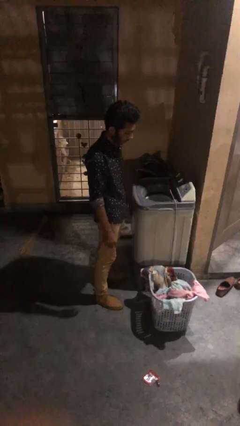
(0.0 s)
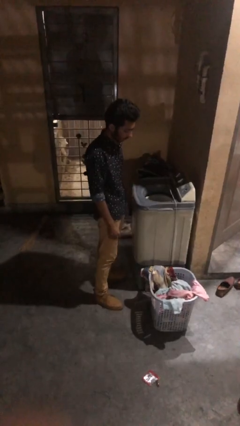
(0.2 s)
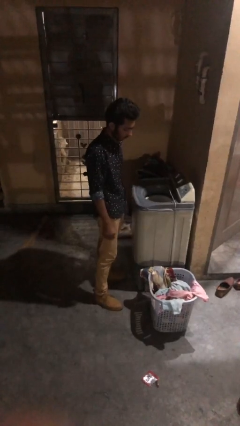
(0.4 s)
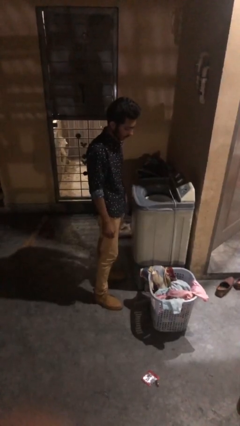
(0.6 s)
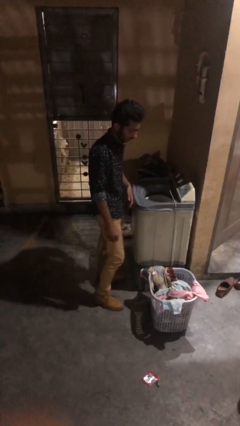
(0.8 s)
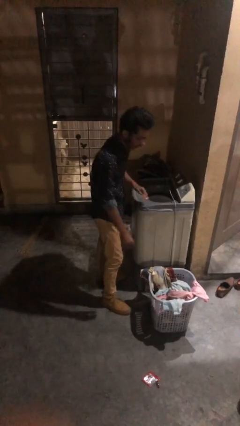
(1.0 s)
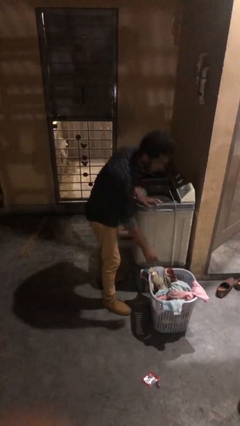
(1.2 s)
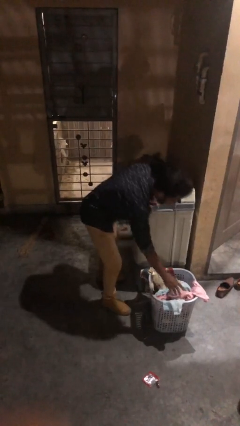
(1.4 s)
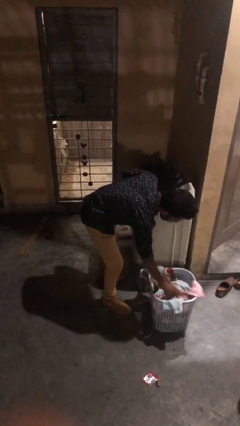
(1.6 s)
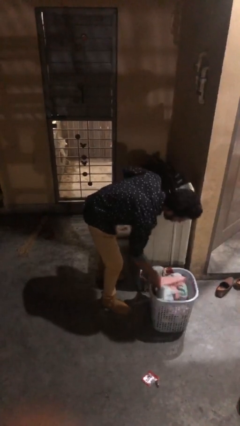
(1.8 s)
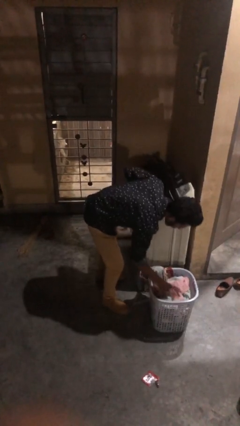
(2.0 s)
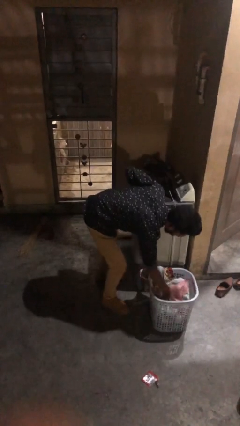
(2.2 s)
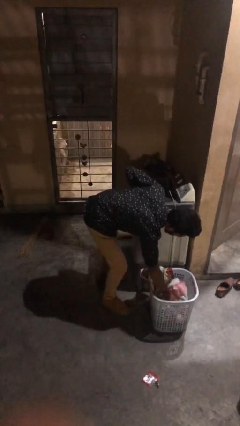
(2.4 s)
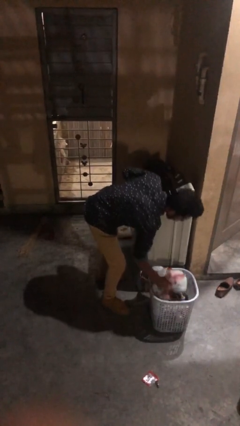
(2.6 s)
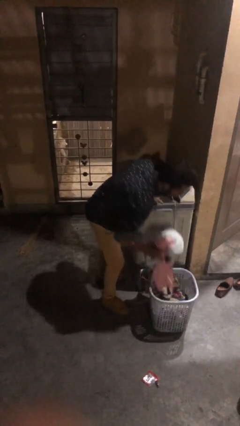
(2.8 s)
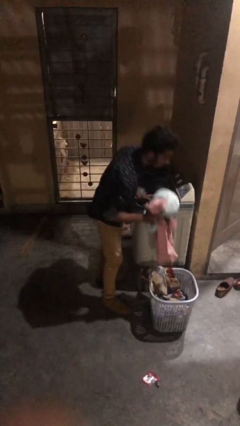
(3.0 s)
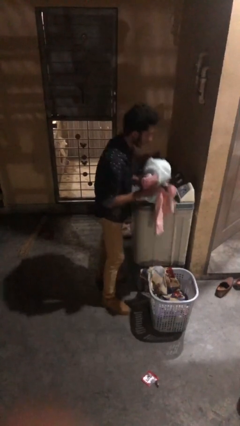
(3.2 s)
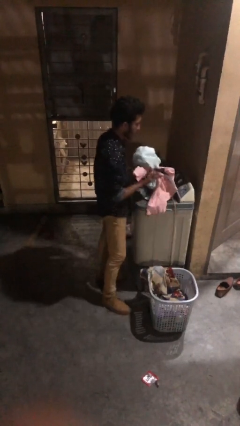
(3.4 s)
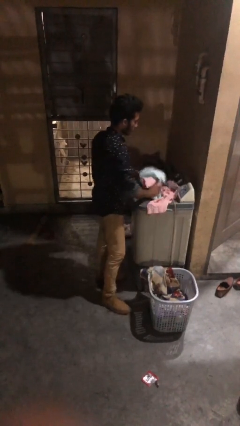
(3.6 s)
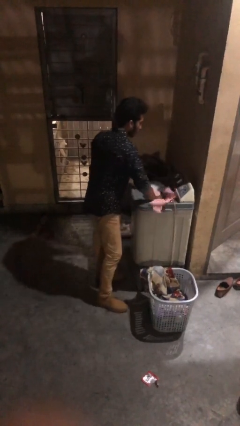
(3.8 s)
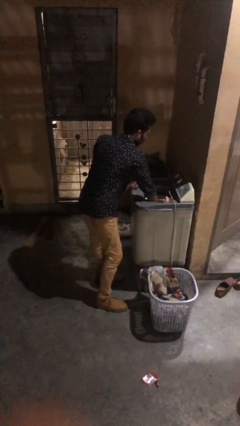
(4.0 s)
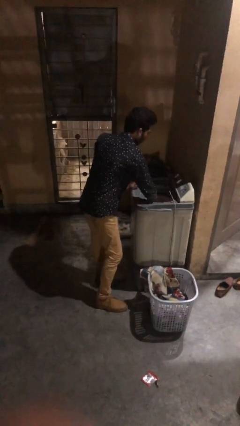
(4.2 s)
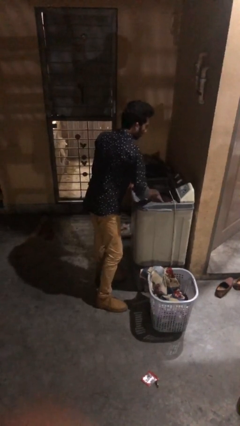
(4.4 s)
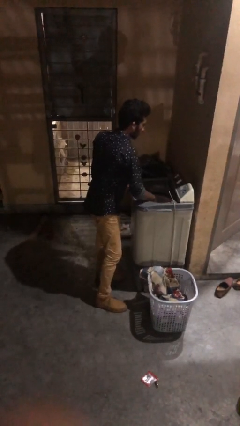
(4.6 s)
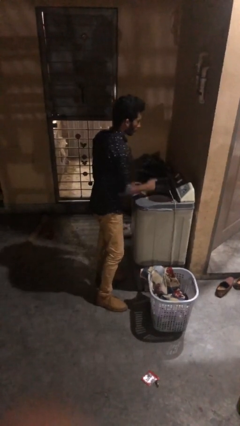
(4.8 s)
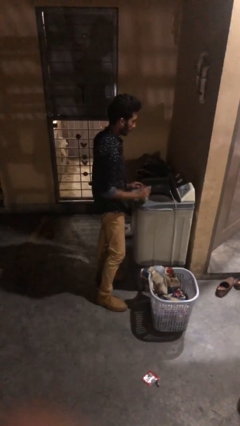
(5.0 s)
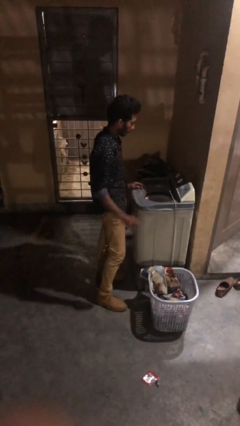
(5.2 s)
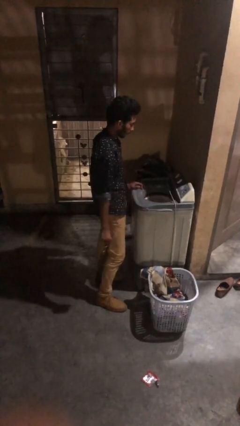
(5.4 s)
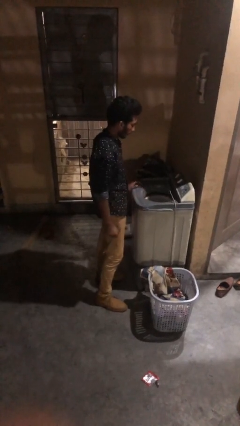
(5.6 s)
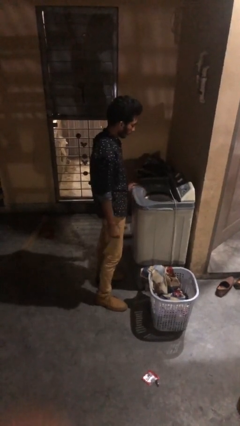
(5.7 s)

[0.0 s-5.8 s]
person loads clotheswasher

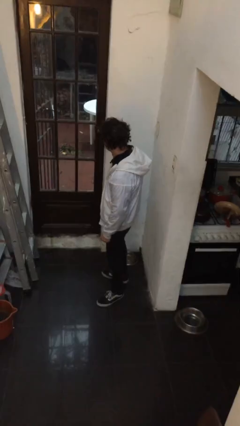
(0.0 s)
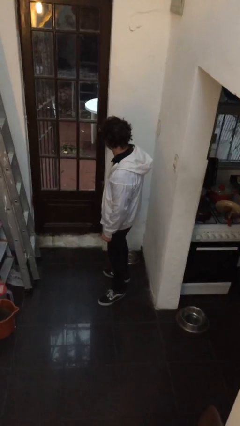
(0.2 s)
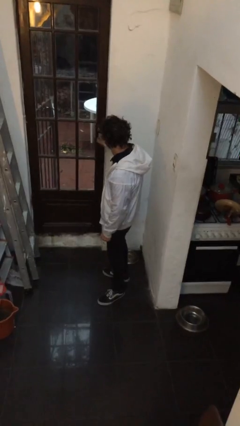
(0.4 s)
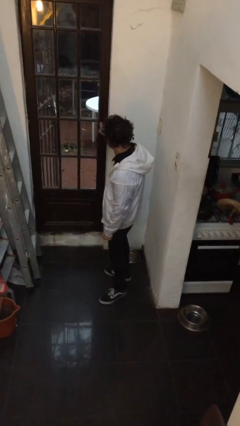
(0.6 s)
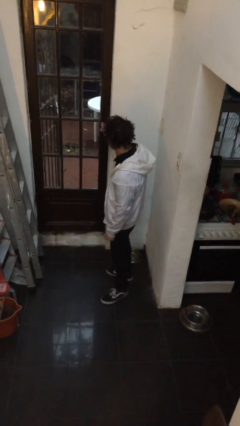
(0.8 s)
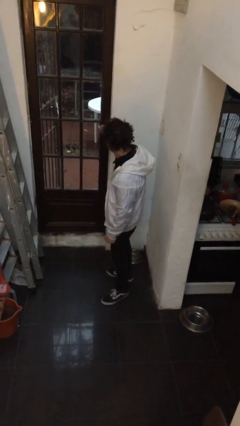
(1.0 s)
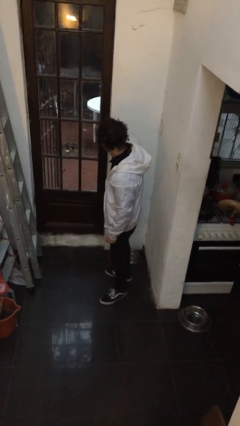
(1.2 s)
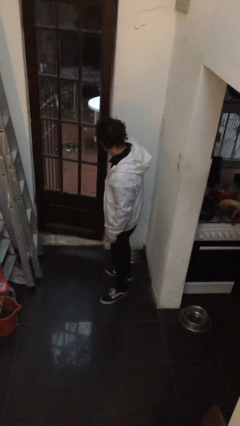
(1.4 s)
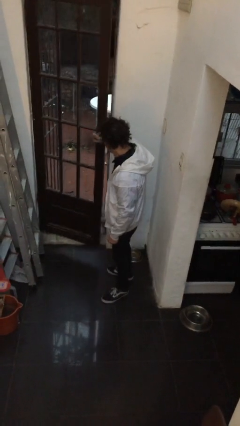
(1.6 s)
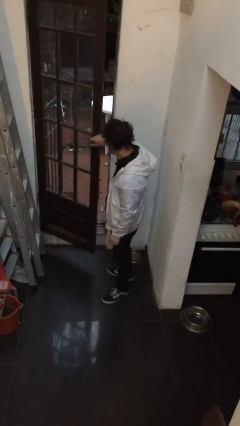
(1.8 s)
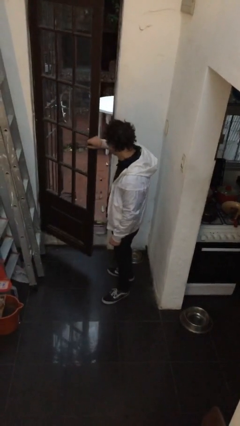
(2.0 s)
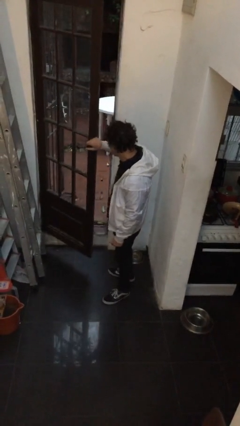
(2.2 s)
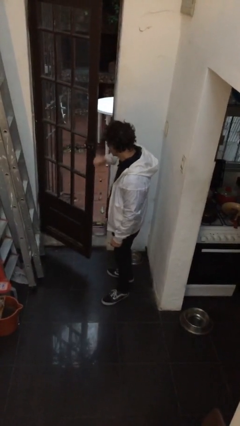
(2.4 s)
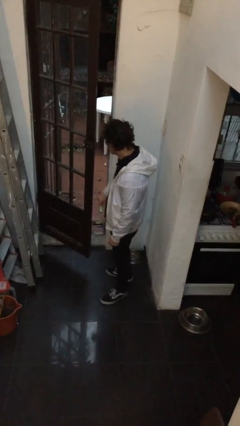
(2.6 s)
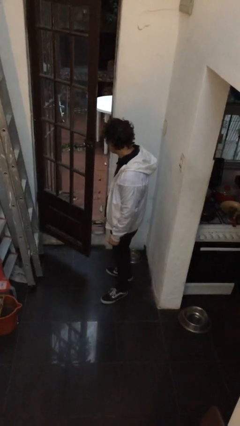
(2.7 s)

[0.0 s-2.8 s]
person opens facility door

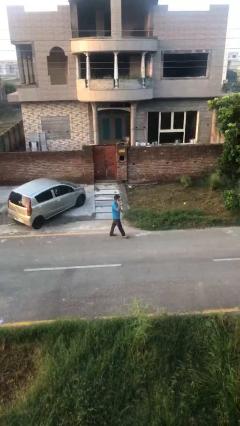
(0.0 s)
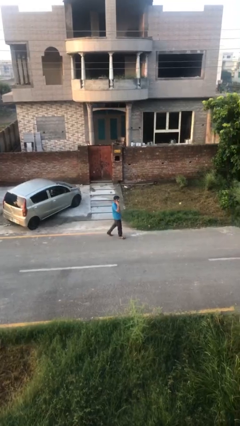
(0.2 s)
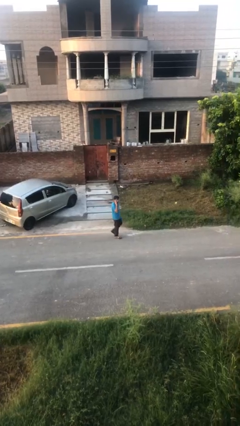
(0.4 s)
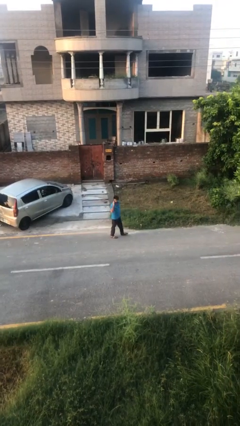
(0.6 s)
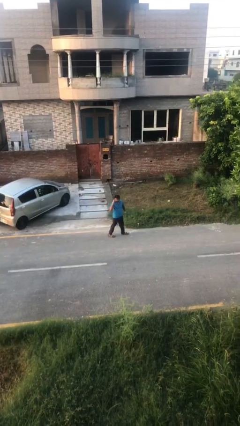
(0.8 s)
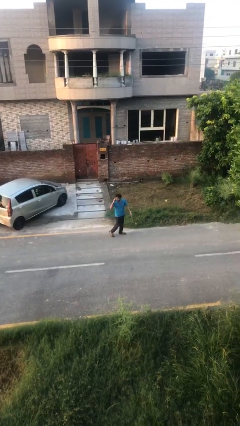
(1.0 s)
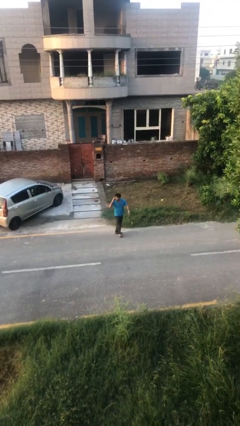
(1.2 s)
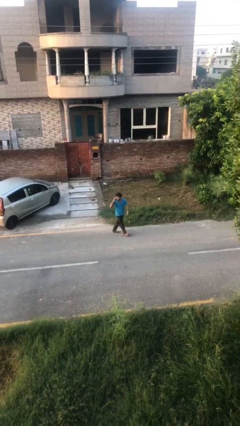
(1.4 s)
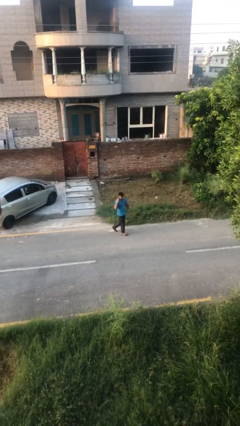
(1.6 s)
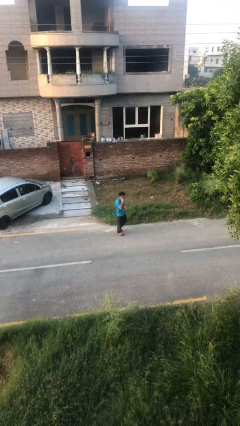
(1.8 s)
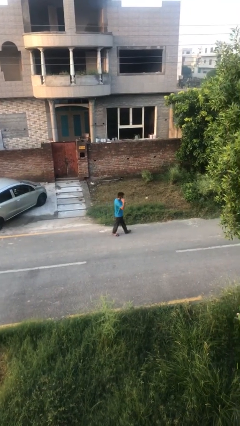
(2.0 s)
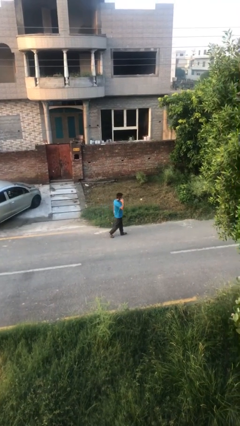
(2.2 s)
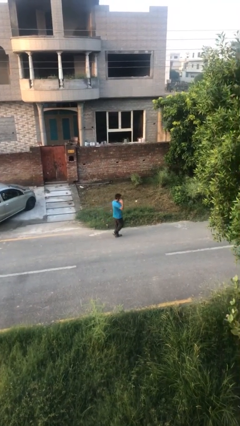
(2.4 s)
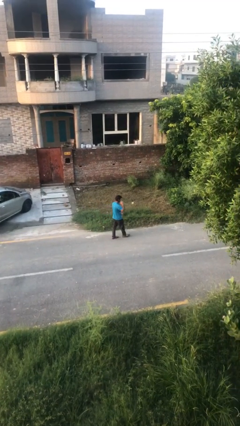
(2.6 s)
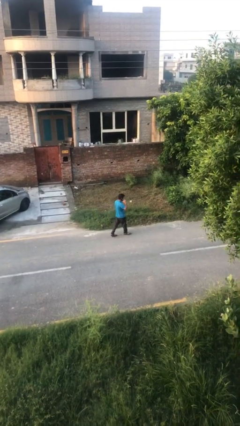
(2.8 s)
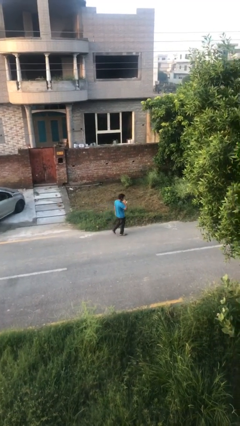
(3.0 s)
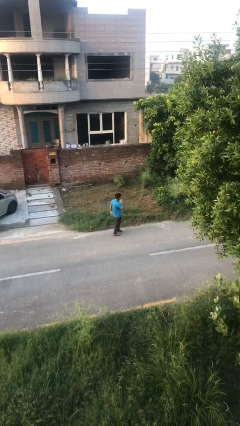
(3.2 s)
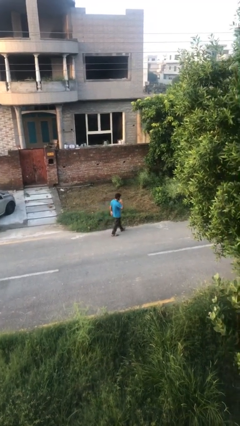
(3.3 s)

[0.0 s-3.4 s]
person talks on phone

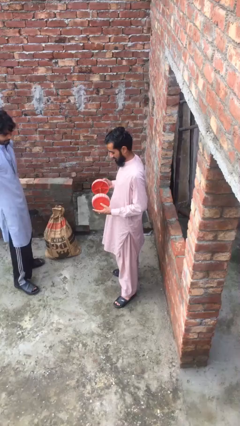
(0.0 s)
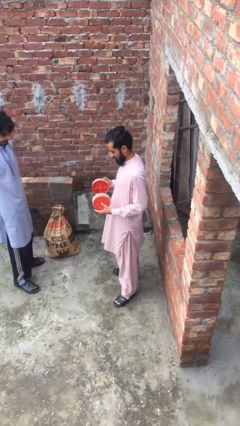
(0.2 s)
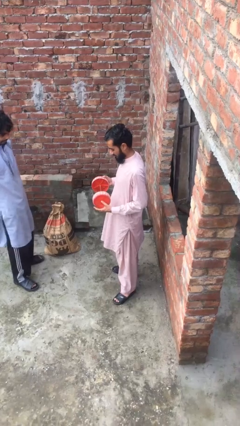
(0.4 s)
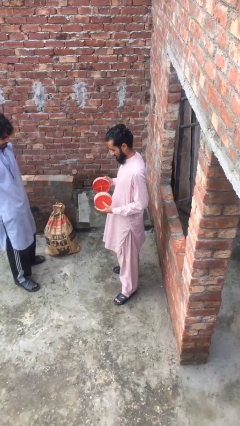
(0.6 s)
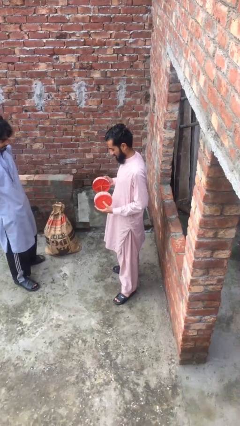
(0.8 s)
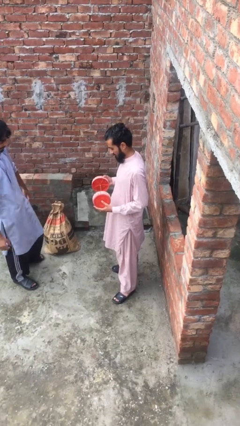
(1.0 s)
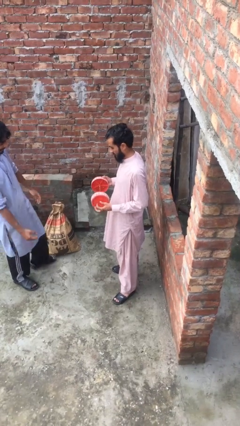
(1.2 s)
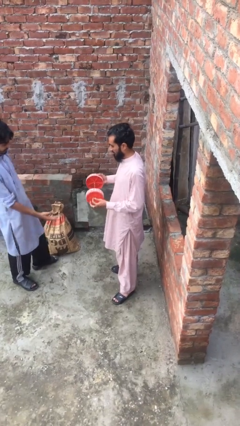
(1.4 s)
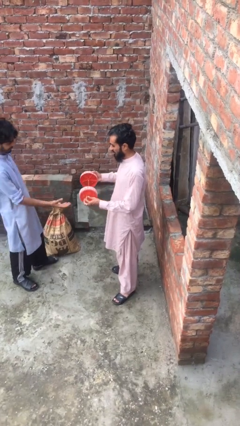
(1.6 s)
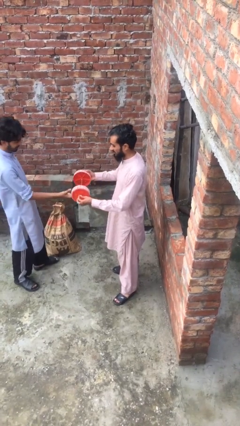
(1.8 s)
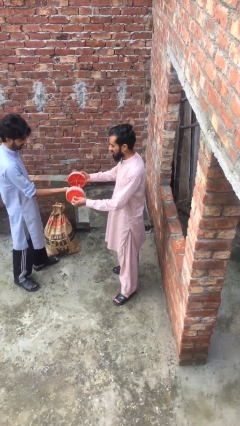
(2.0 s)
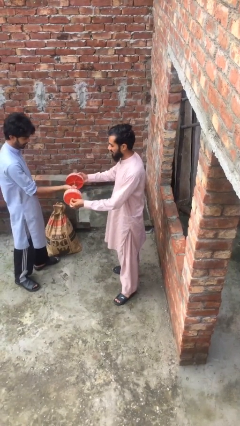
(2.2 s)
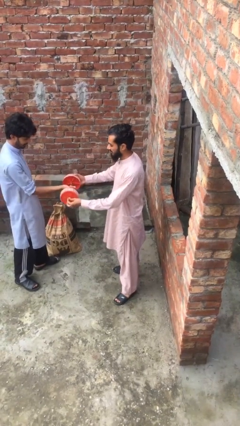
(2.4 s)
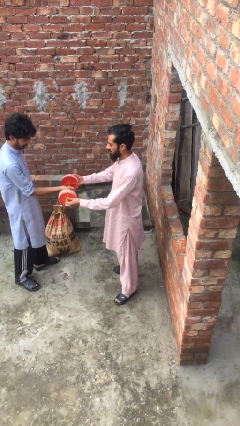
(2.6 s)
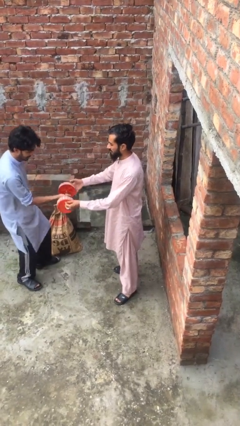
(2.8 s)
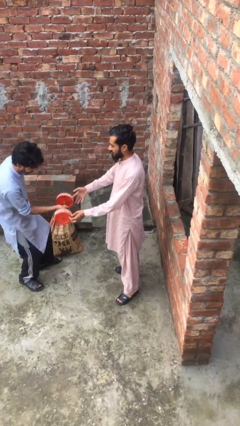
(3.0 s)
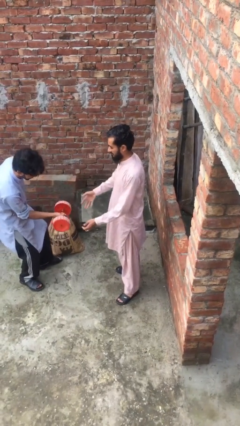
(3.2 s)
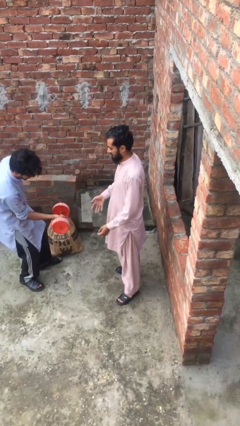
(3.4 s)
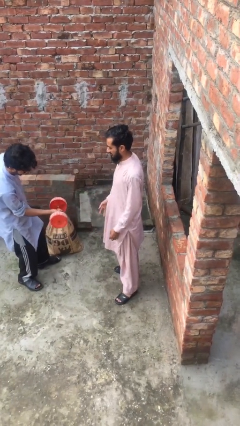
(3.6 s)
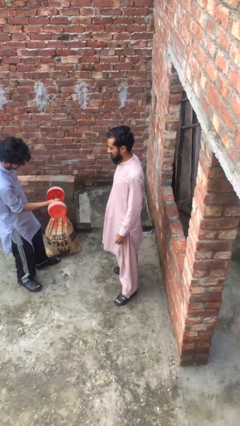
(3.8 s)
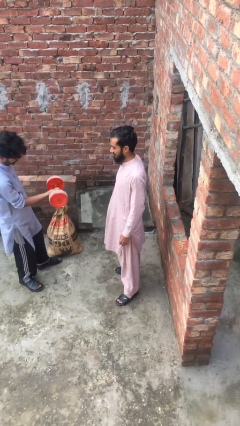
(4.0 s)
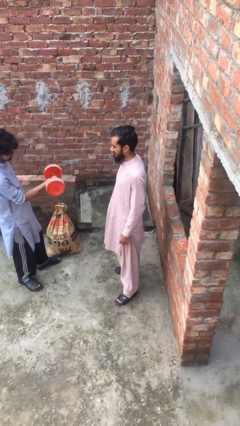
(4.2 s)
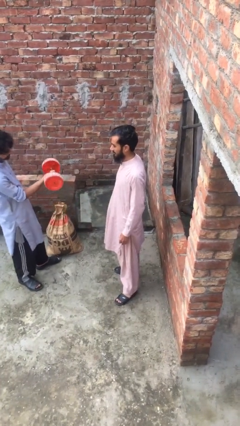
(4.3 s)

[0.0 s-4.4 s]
person transfers object to person

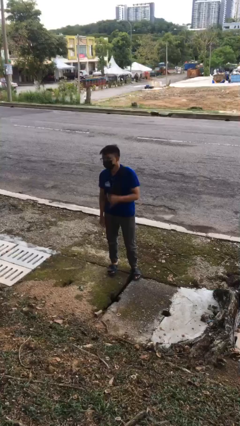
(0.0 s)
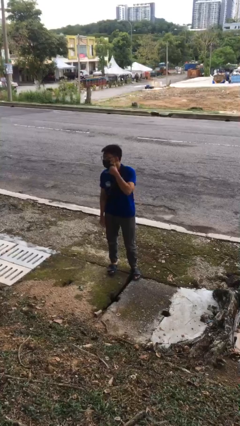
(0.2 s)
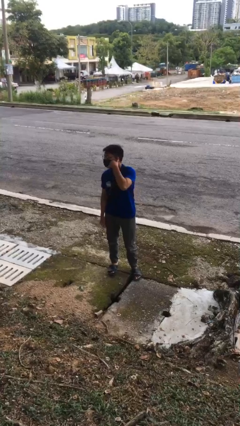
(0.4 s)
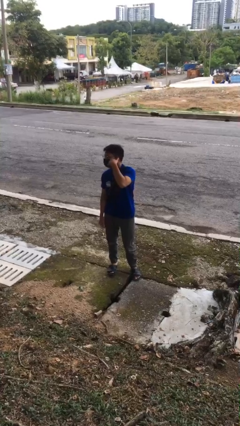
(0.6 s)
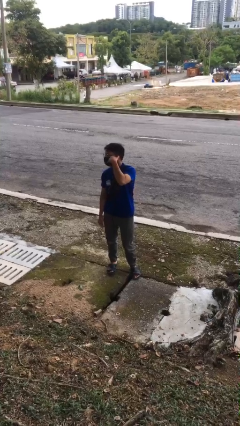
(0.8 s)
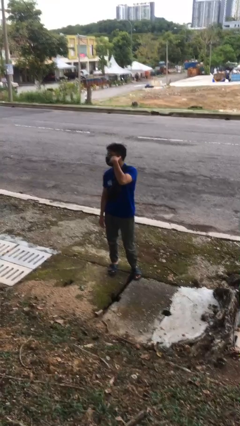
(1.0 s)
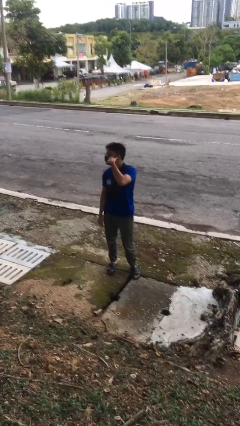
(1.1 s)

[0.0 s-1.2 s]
person gestures call me

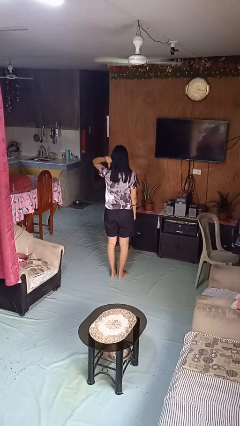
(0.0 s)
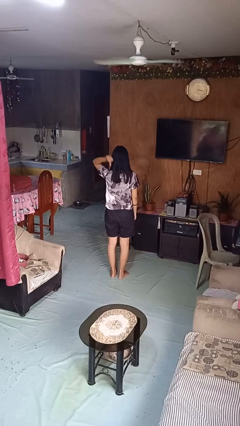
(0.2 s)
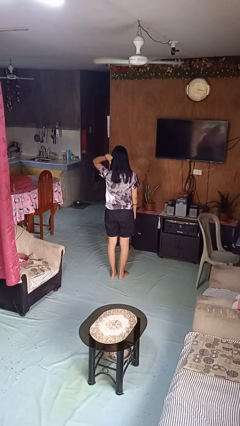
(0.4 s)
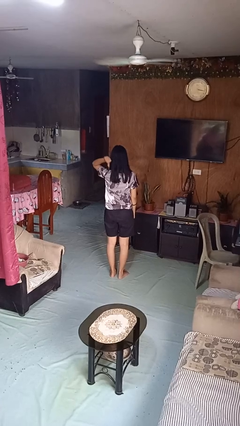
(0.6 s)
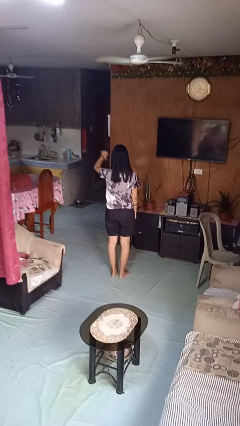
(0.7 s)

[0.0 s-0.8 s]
person gestures behind me
